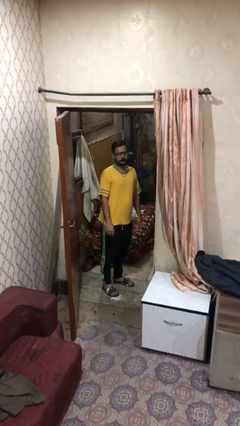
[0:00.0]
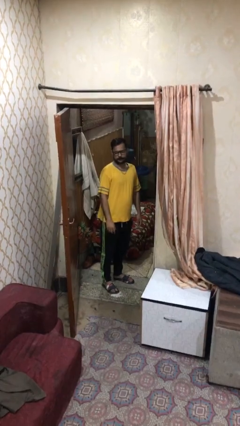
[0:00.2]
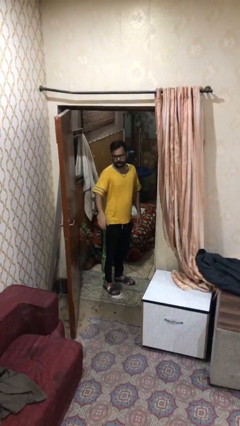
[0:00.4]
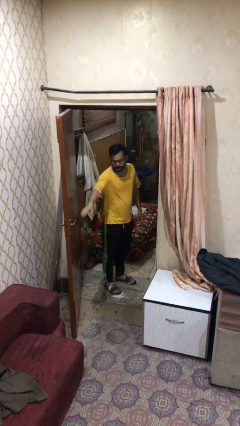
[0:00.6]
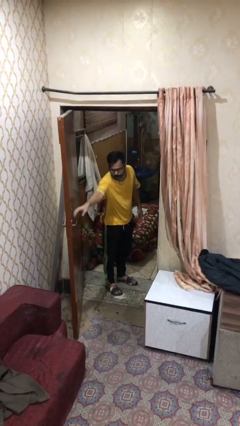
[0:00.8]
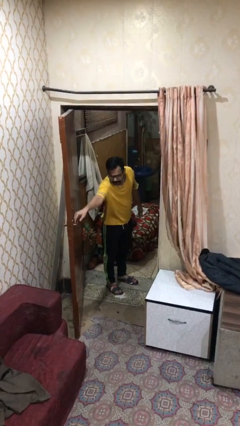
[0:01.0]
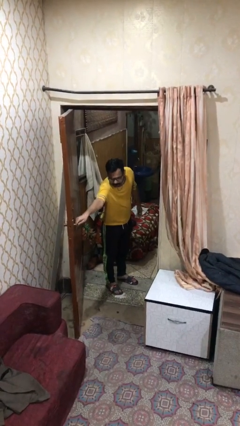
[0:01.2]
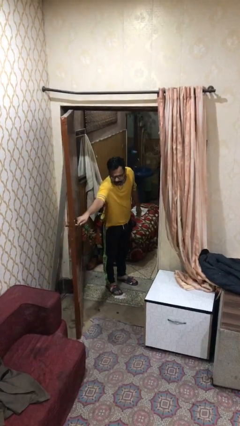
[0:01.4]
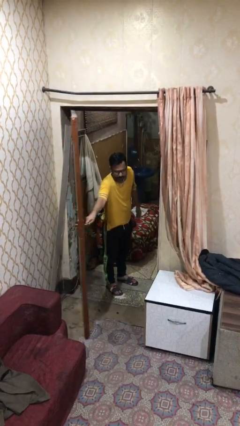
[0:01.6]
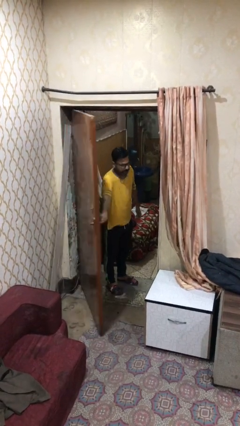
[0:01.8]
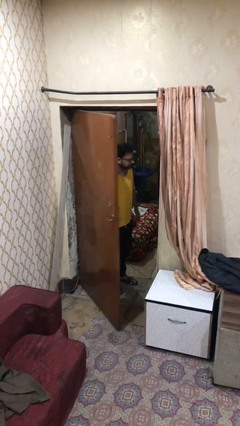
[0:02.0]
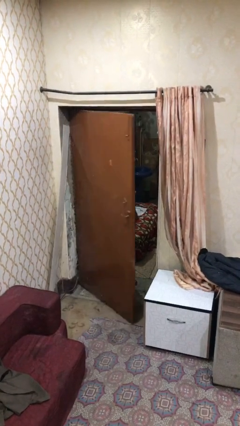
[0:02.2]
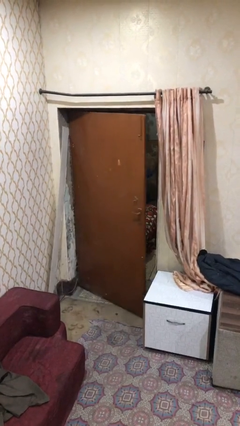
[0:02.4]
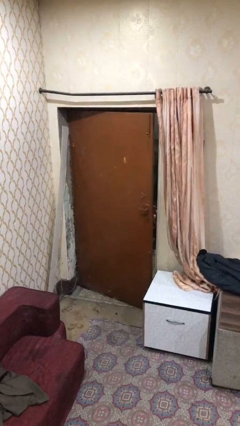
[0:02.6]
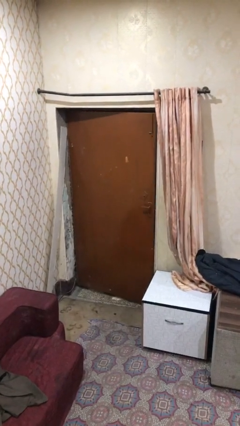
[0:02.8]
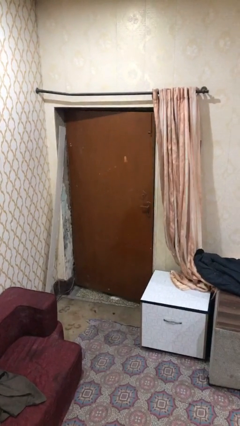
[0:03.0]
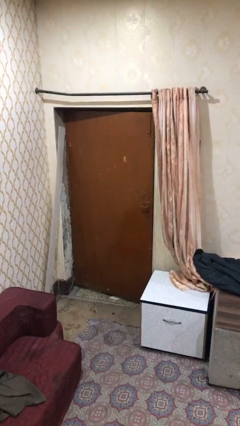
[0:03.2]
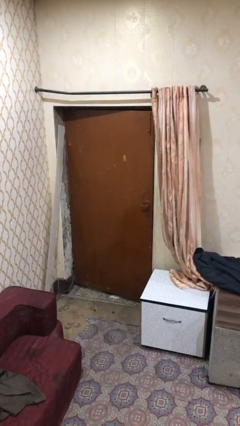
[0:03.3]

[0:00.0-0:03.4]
person closes facility door

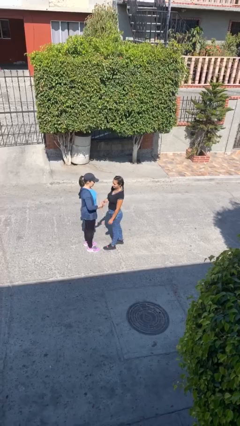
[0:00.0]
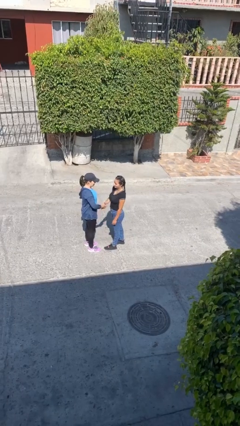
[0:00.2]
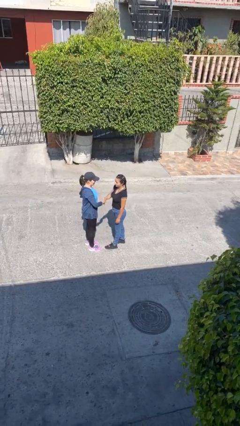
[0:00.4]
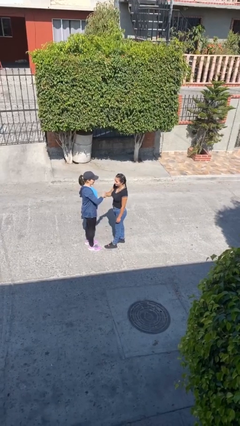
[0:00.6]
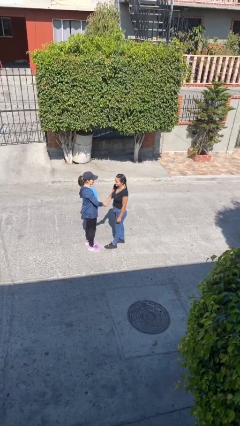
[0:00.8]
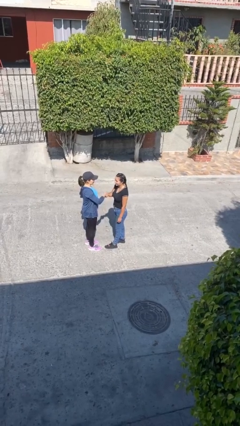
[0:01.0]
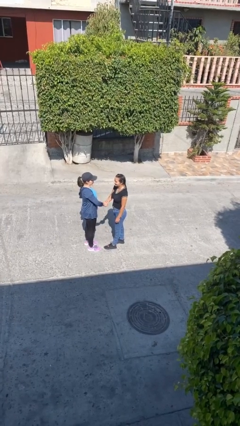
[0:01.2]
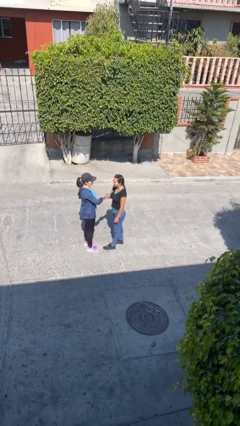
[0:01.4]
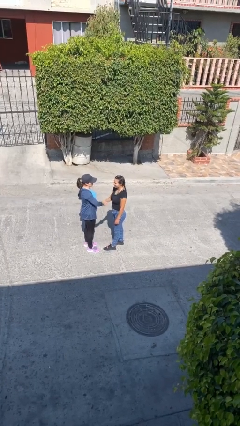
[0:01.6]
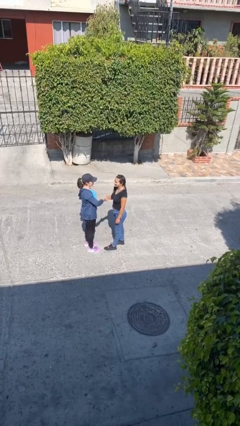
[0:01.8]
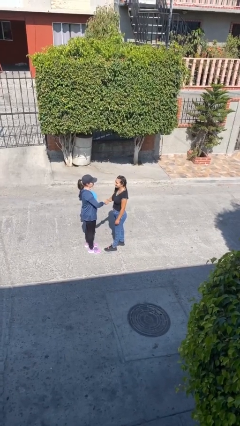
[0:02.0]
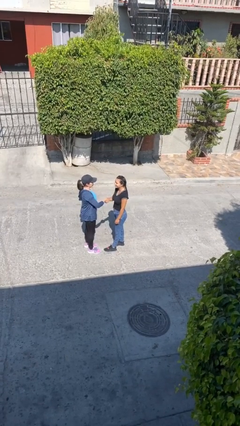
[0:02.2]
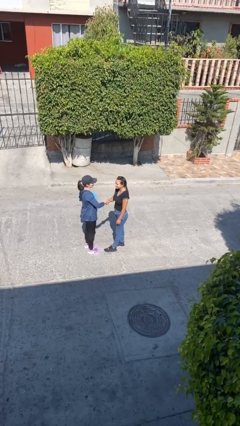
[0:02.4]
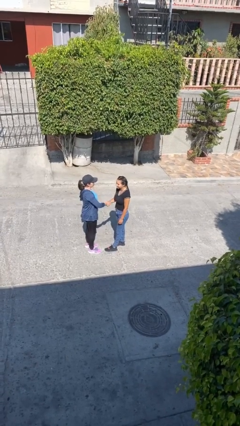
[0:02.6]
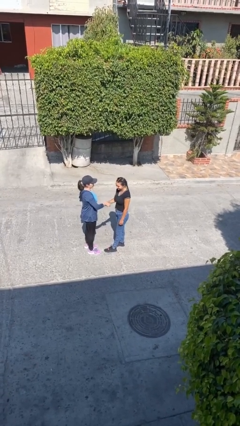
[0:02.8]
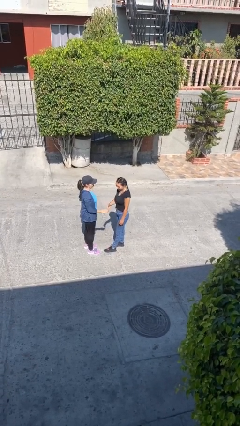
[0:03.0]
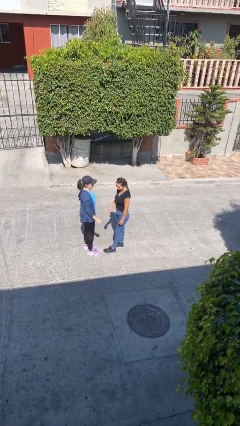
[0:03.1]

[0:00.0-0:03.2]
person shakes hand

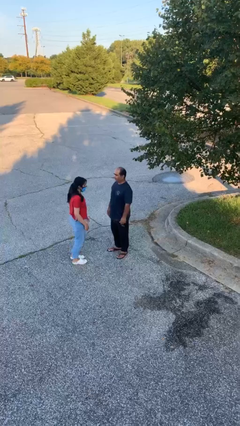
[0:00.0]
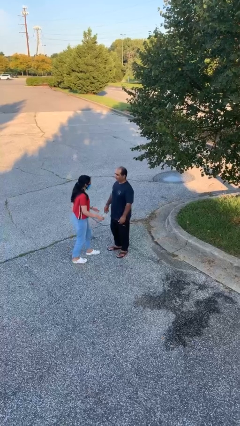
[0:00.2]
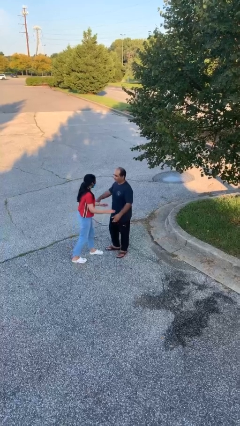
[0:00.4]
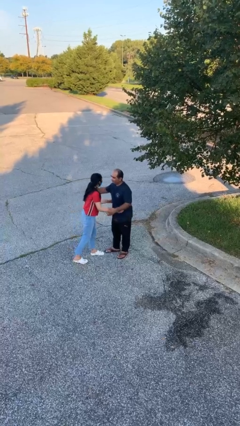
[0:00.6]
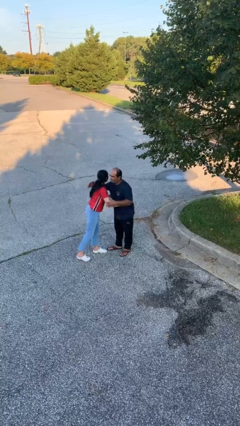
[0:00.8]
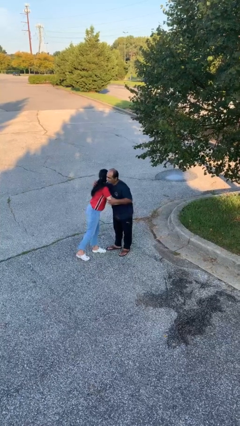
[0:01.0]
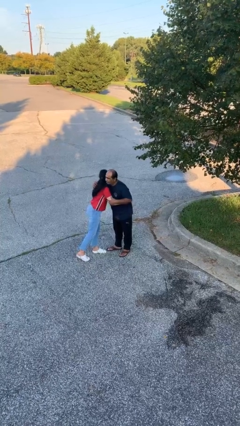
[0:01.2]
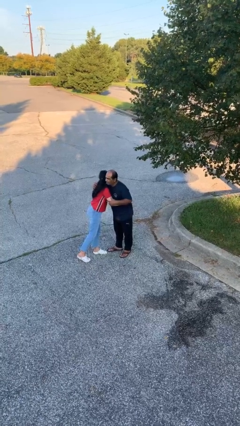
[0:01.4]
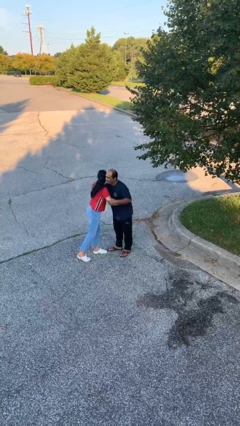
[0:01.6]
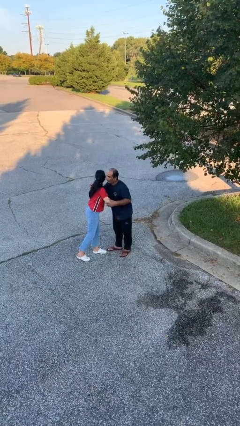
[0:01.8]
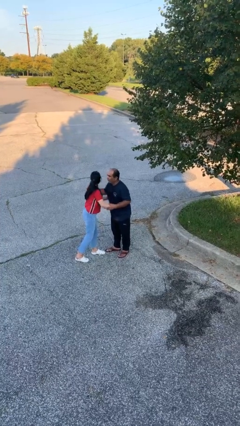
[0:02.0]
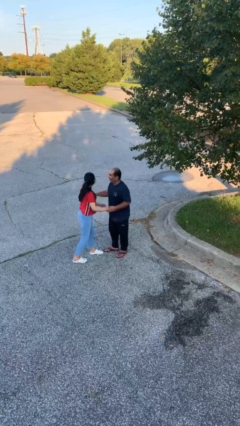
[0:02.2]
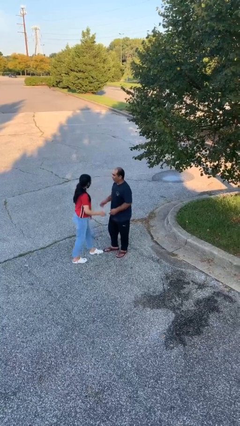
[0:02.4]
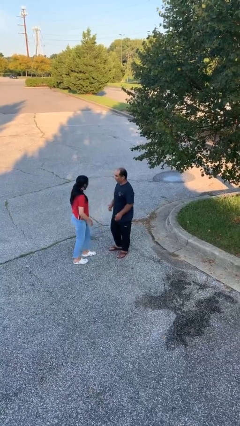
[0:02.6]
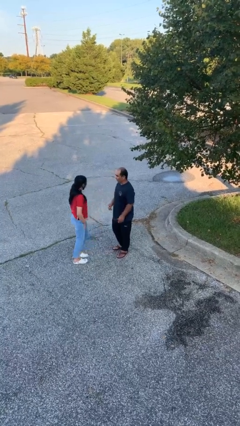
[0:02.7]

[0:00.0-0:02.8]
person embraces person

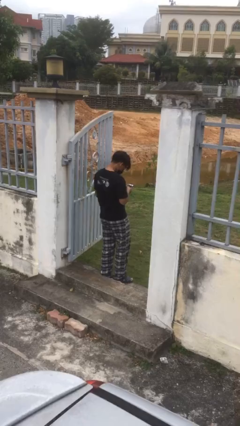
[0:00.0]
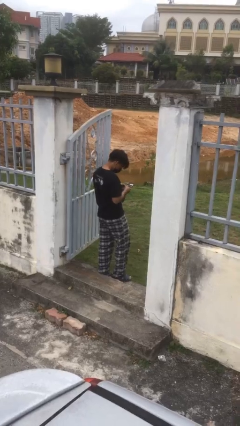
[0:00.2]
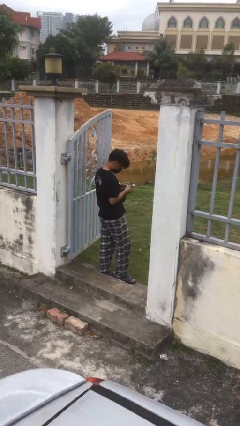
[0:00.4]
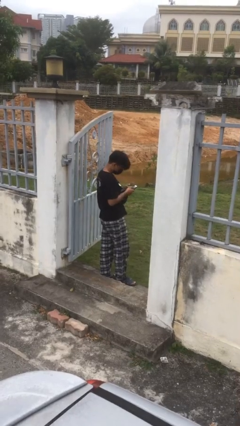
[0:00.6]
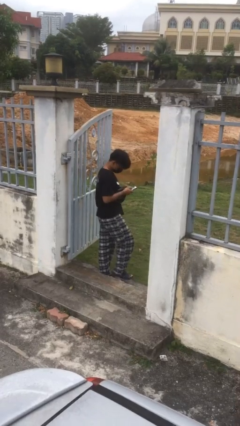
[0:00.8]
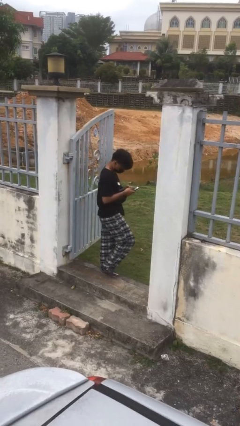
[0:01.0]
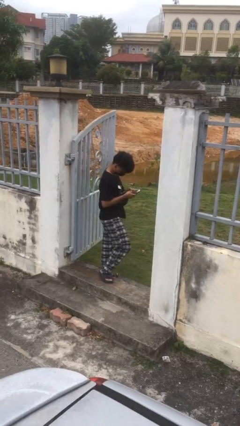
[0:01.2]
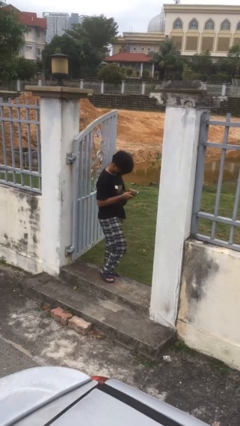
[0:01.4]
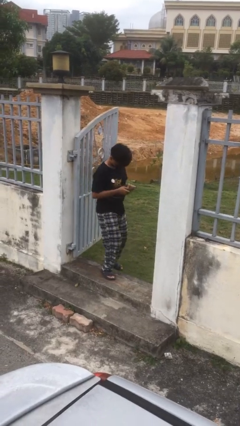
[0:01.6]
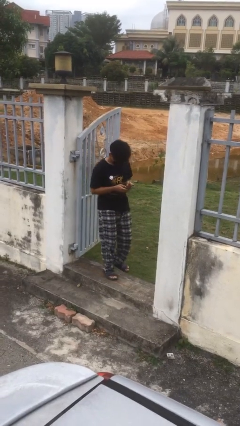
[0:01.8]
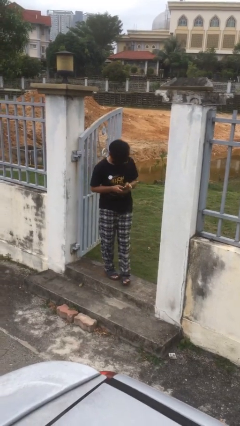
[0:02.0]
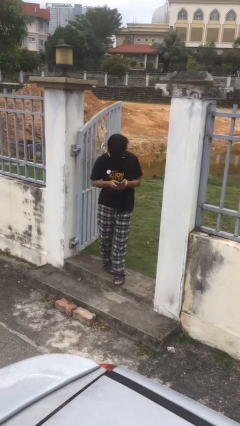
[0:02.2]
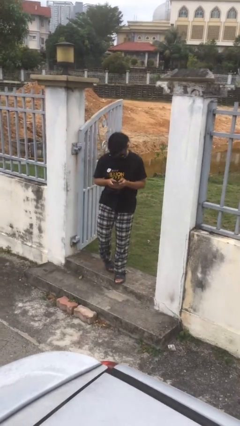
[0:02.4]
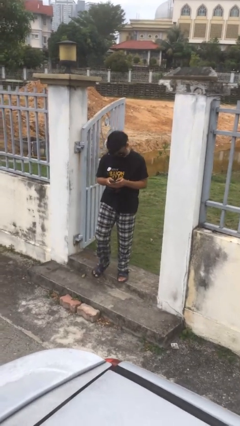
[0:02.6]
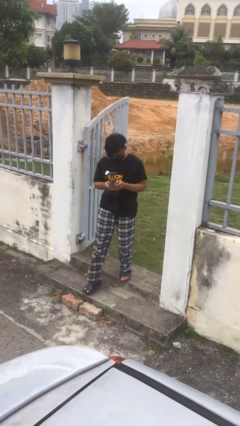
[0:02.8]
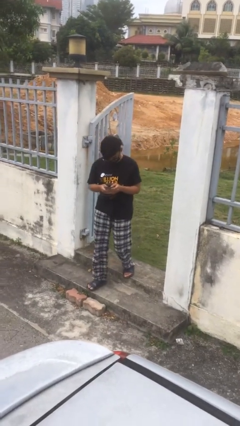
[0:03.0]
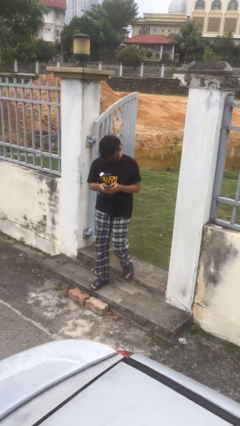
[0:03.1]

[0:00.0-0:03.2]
person enters scene through structure

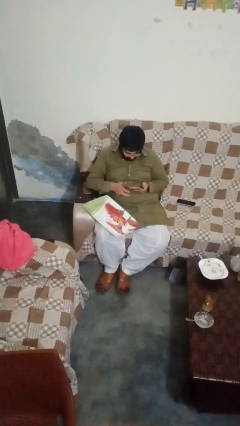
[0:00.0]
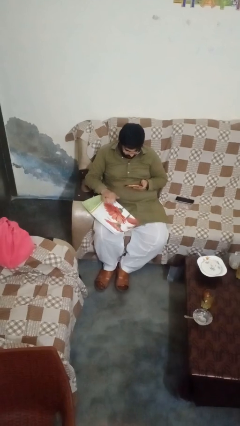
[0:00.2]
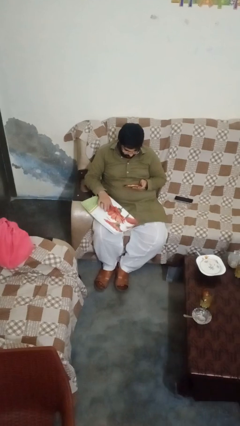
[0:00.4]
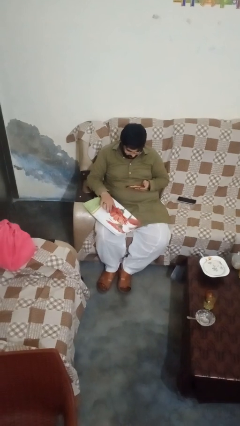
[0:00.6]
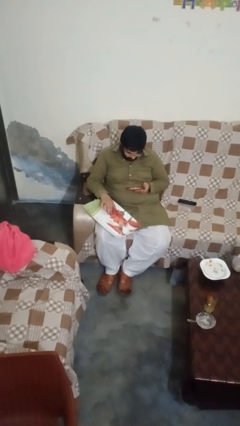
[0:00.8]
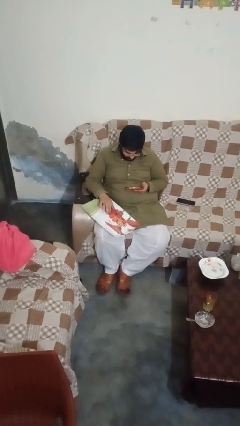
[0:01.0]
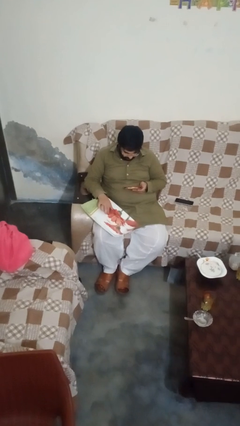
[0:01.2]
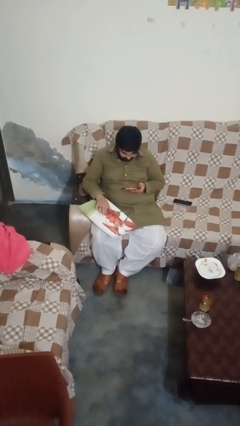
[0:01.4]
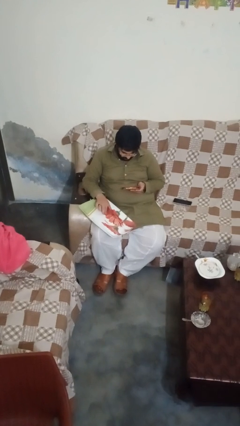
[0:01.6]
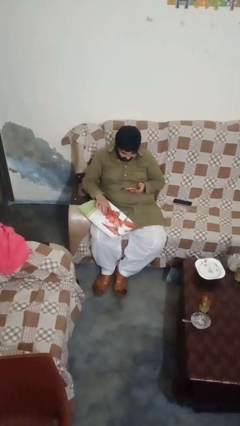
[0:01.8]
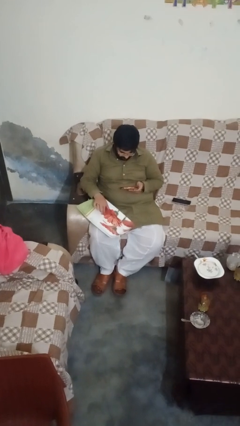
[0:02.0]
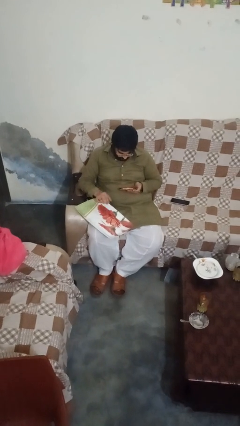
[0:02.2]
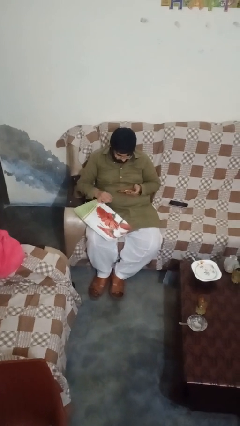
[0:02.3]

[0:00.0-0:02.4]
person taps object with finger

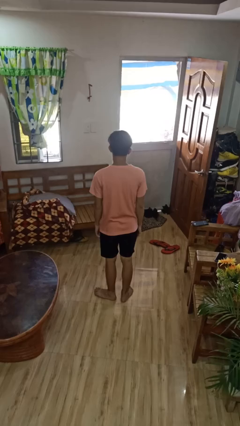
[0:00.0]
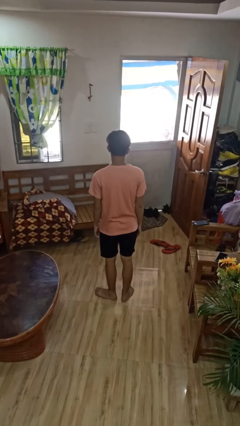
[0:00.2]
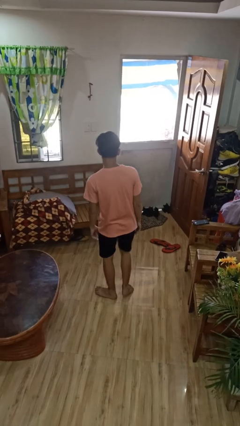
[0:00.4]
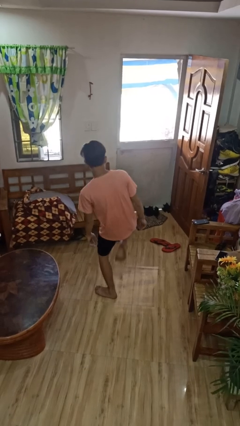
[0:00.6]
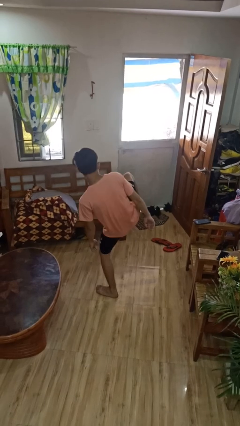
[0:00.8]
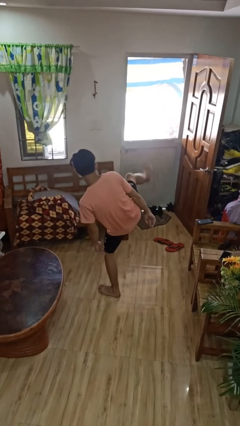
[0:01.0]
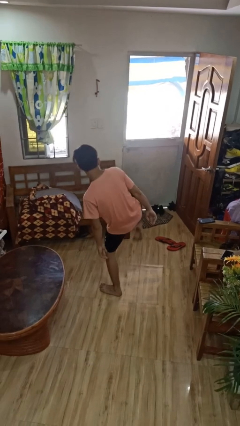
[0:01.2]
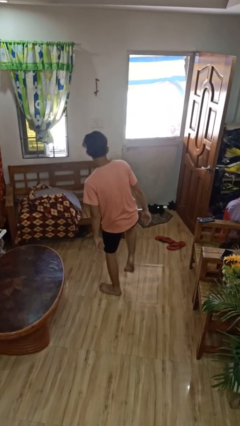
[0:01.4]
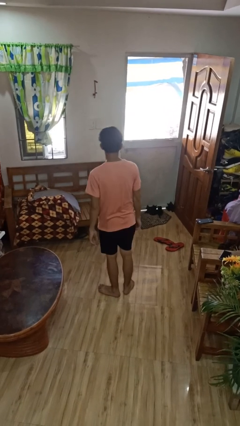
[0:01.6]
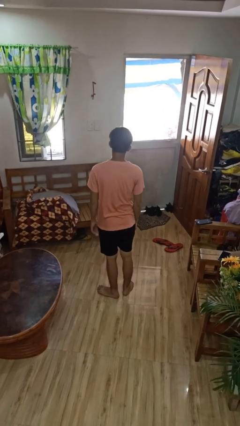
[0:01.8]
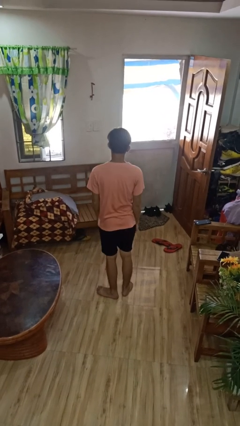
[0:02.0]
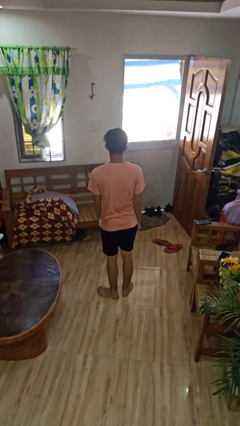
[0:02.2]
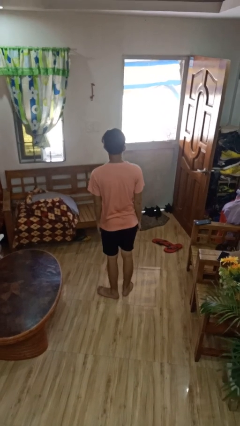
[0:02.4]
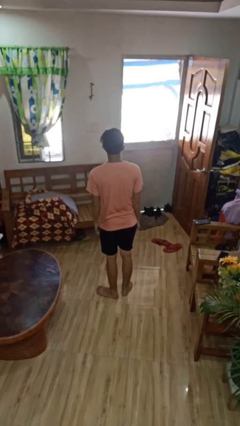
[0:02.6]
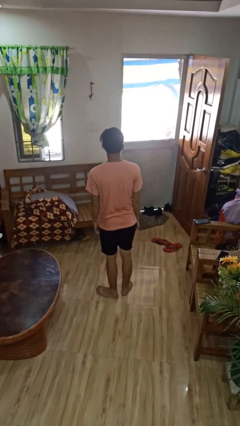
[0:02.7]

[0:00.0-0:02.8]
person karate kicks
